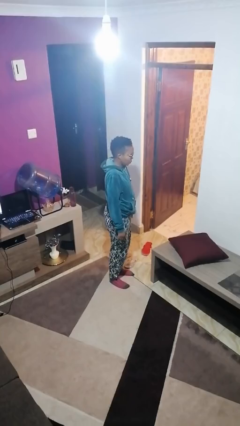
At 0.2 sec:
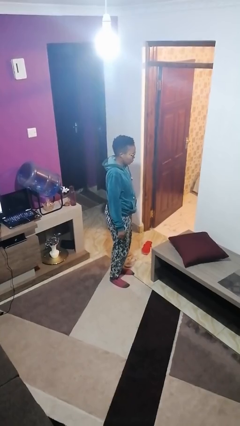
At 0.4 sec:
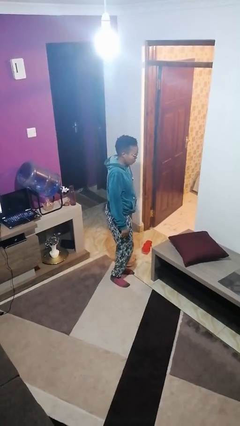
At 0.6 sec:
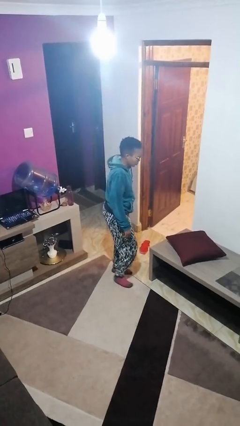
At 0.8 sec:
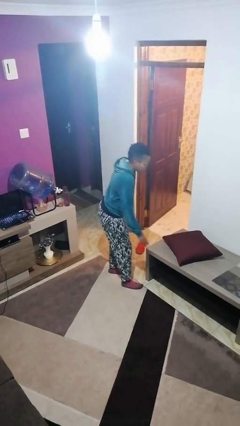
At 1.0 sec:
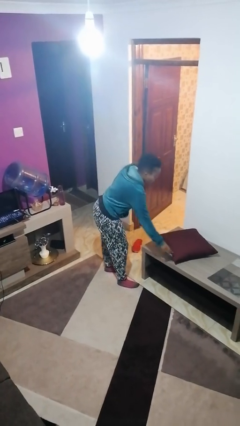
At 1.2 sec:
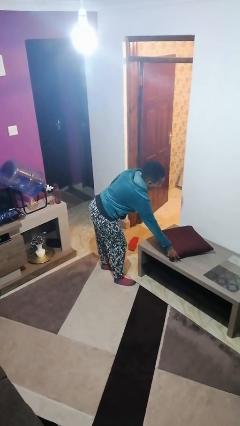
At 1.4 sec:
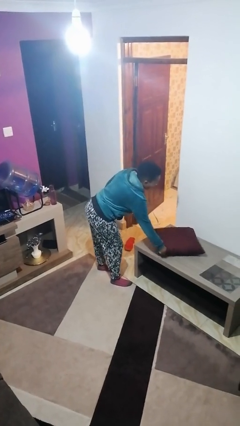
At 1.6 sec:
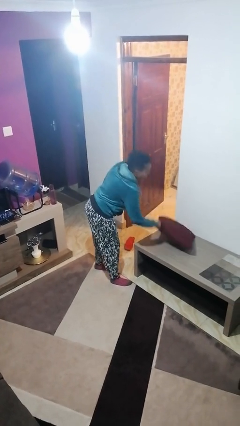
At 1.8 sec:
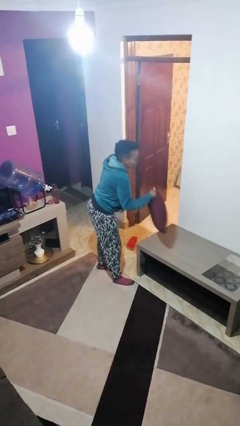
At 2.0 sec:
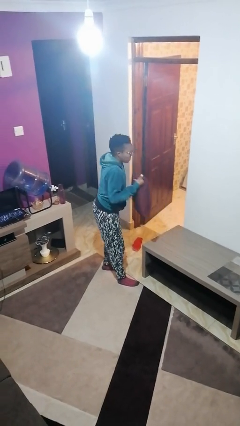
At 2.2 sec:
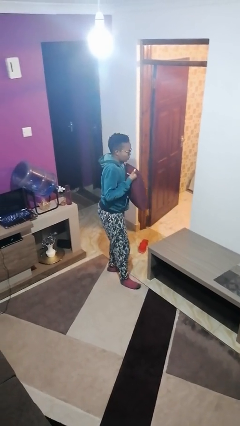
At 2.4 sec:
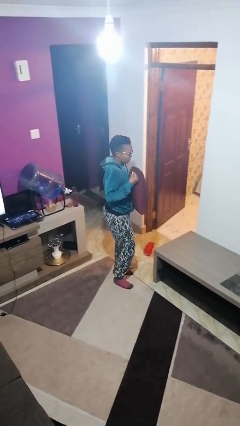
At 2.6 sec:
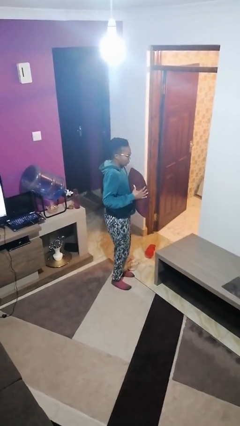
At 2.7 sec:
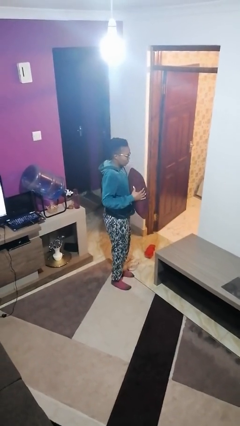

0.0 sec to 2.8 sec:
person picks up object from table

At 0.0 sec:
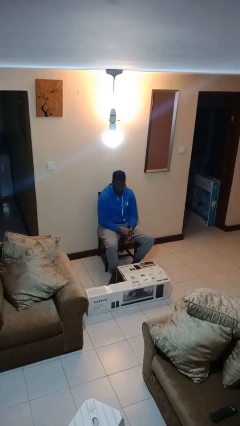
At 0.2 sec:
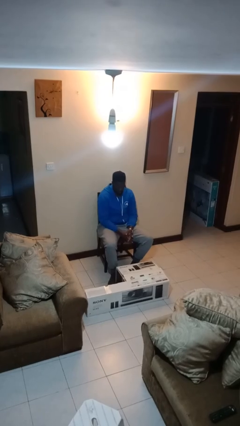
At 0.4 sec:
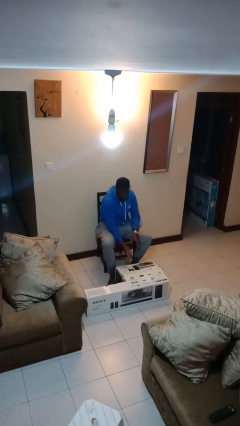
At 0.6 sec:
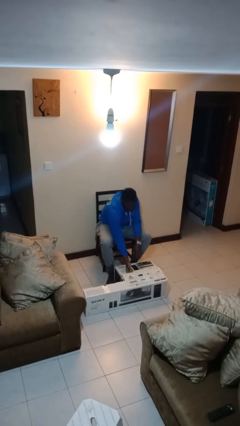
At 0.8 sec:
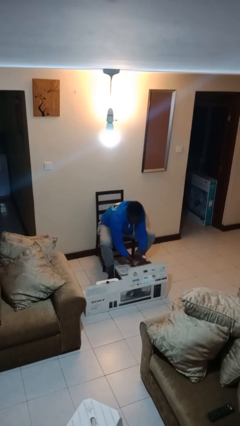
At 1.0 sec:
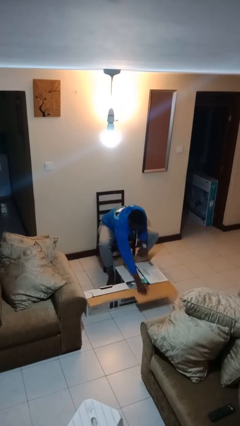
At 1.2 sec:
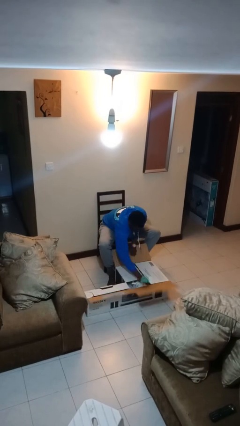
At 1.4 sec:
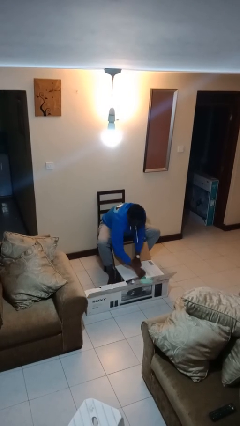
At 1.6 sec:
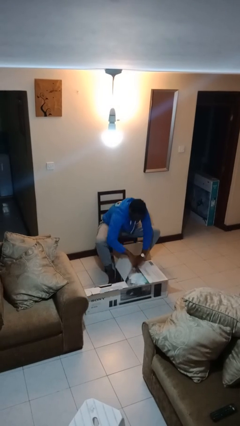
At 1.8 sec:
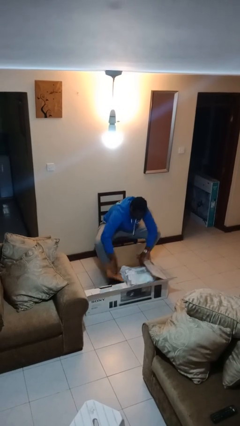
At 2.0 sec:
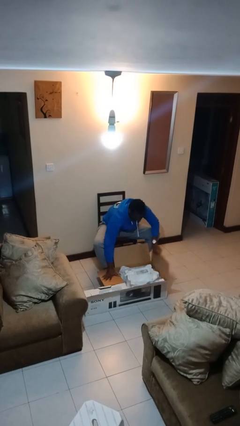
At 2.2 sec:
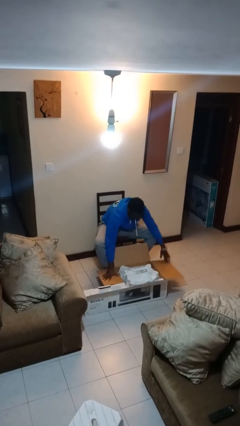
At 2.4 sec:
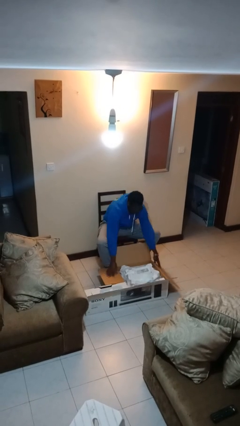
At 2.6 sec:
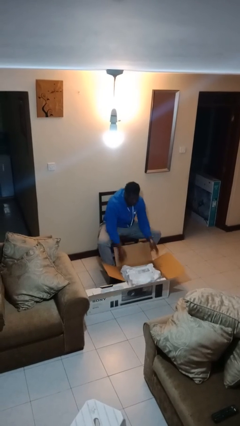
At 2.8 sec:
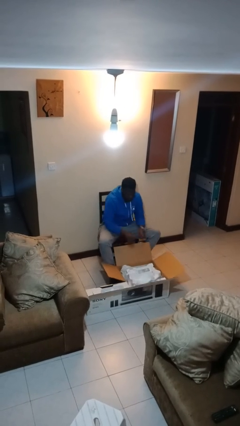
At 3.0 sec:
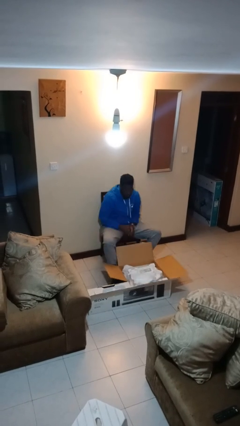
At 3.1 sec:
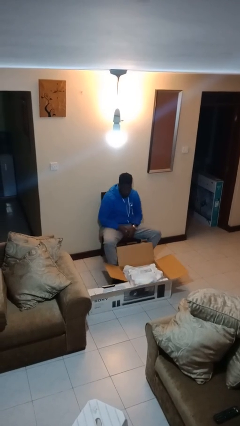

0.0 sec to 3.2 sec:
person opens box

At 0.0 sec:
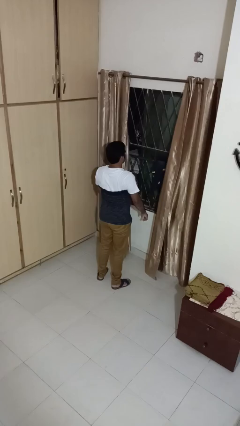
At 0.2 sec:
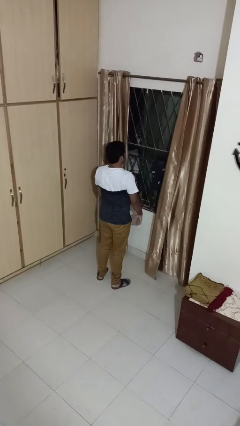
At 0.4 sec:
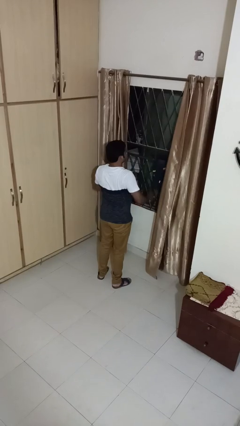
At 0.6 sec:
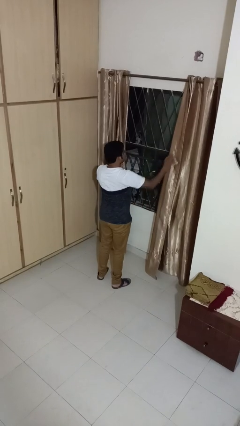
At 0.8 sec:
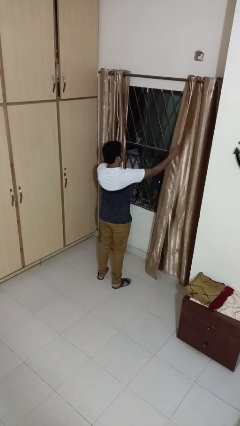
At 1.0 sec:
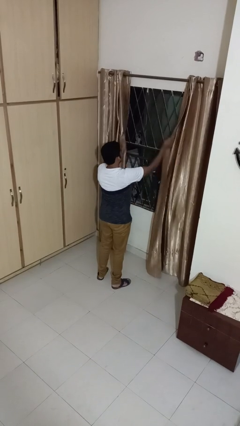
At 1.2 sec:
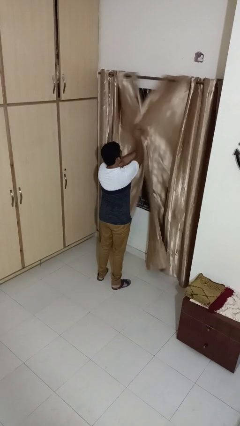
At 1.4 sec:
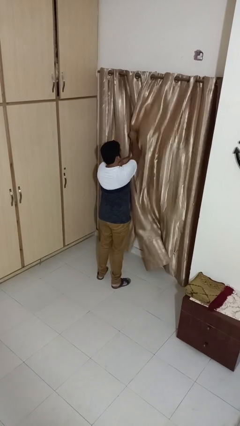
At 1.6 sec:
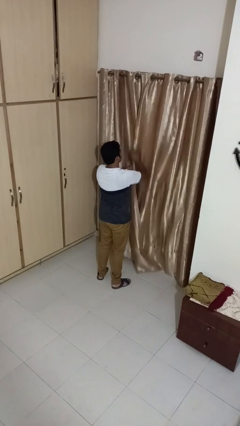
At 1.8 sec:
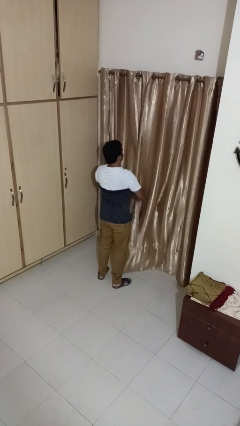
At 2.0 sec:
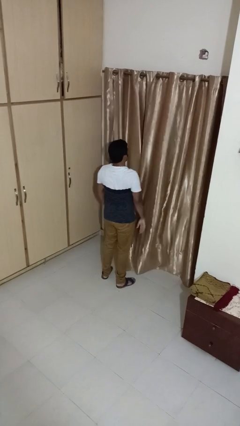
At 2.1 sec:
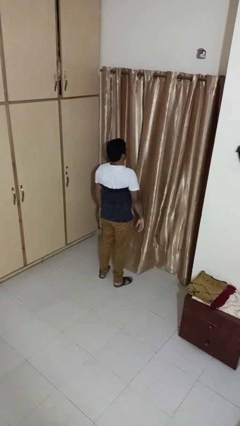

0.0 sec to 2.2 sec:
person closes curtains

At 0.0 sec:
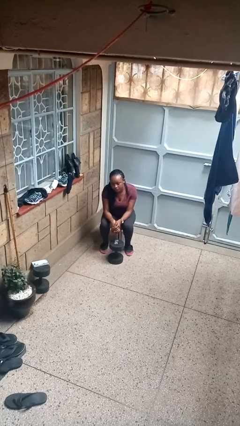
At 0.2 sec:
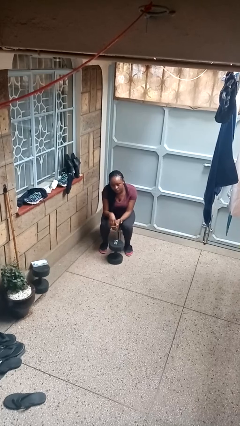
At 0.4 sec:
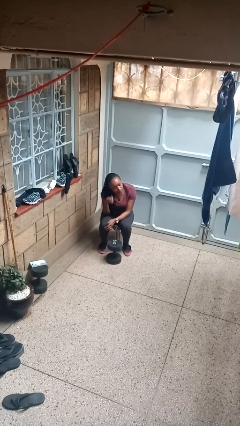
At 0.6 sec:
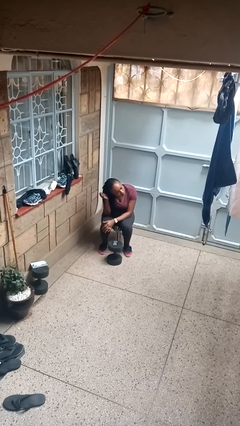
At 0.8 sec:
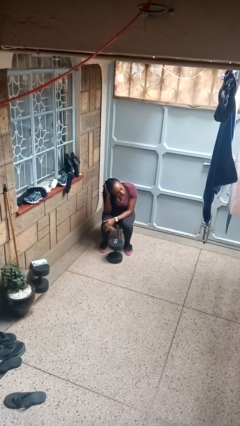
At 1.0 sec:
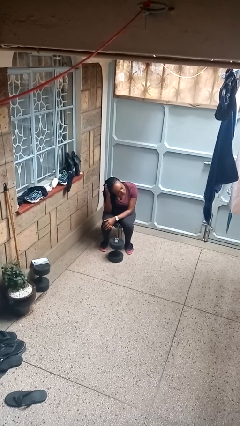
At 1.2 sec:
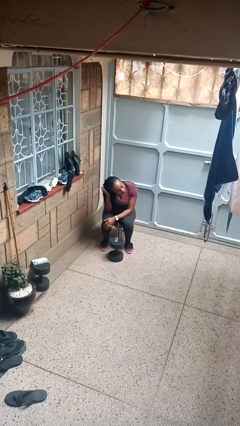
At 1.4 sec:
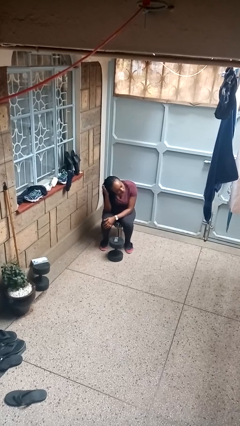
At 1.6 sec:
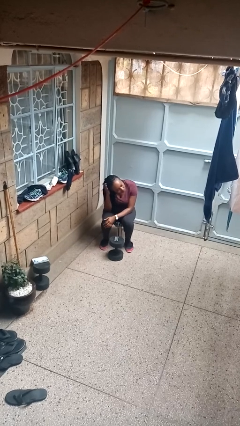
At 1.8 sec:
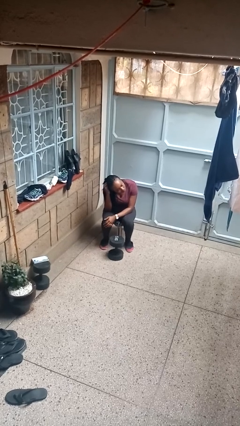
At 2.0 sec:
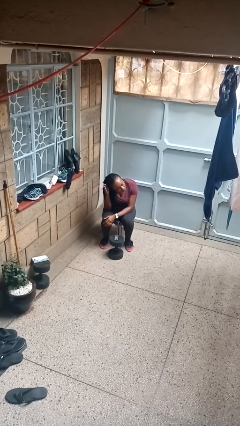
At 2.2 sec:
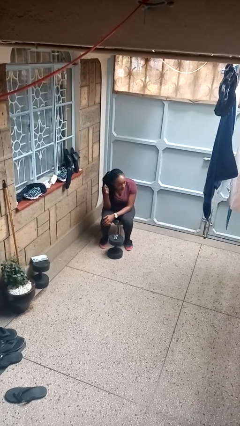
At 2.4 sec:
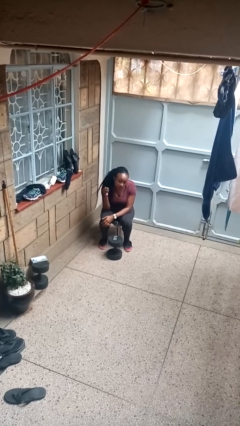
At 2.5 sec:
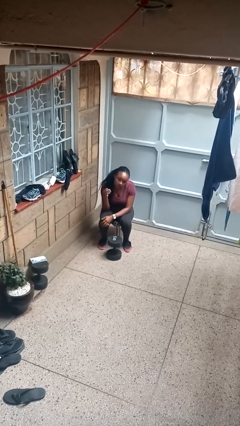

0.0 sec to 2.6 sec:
person pats head

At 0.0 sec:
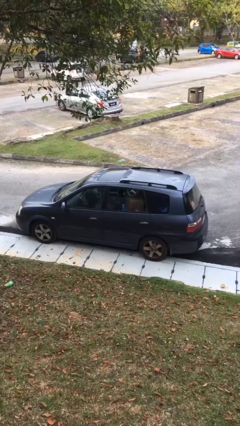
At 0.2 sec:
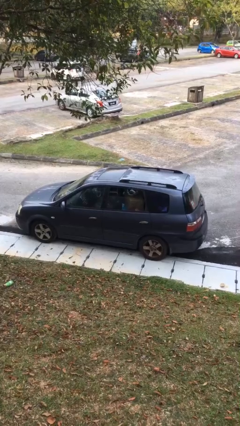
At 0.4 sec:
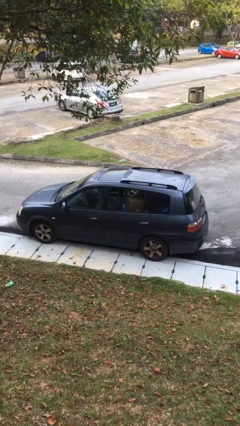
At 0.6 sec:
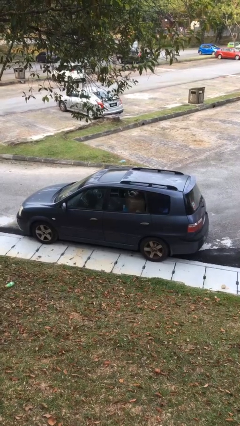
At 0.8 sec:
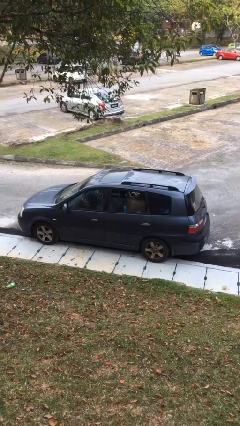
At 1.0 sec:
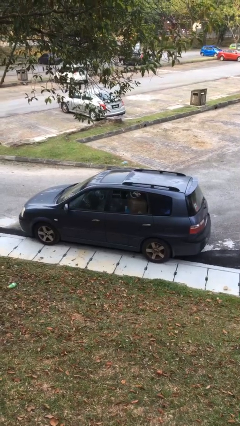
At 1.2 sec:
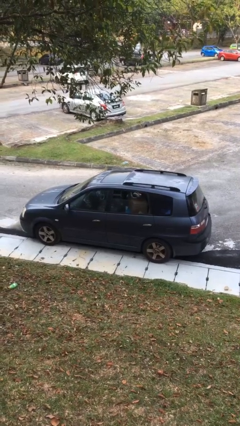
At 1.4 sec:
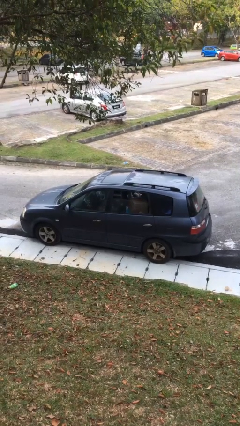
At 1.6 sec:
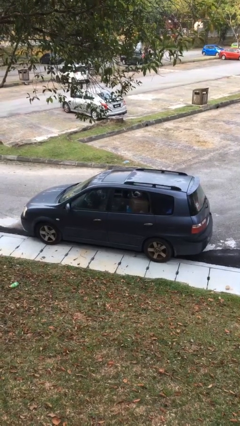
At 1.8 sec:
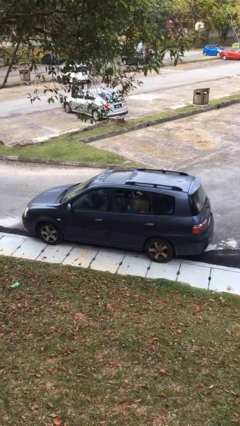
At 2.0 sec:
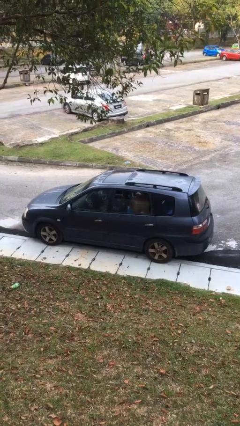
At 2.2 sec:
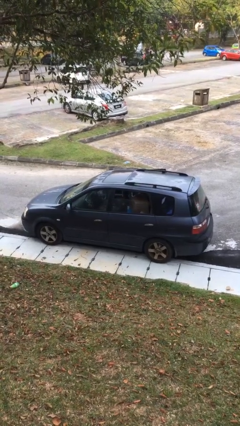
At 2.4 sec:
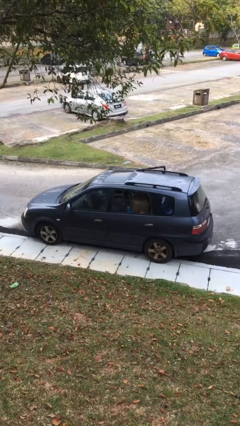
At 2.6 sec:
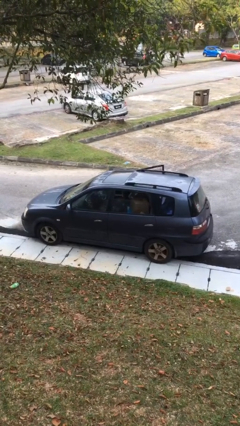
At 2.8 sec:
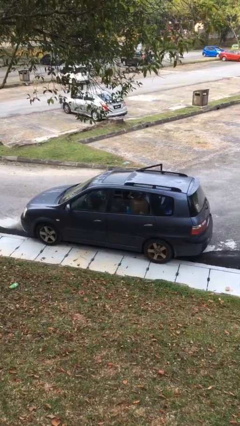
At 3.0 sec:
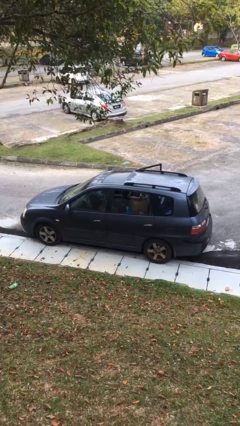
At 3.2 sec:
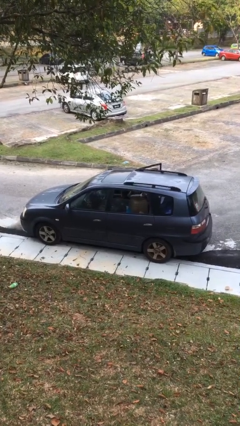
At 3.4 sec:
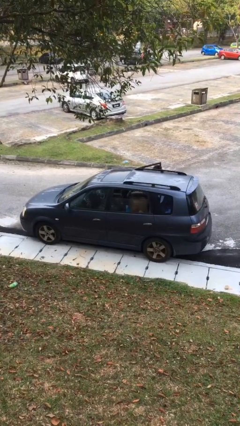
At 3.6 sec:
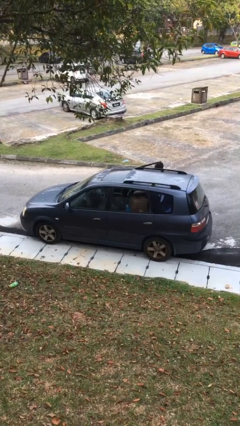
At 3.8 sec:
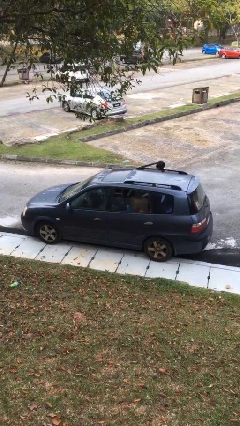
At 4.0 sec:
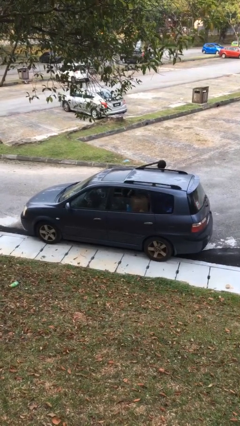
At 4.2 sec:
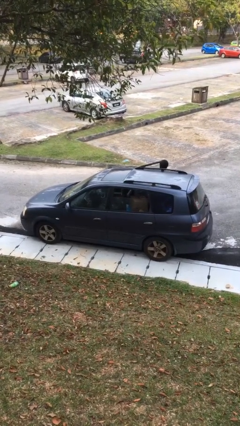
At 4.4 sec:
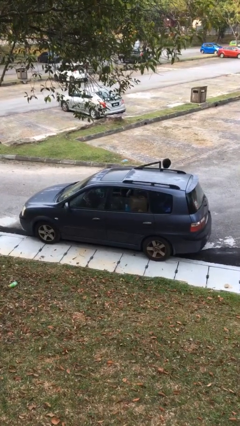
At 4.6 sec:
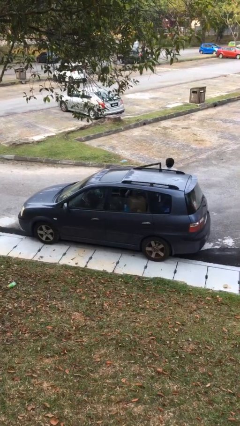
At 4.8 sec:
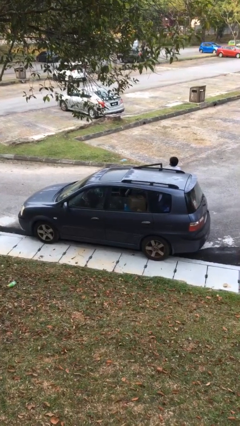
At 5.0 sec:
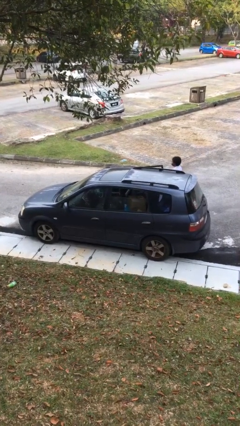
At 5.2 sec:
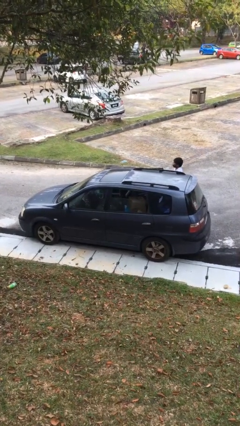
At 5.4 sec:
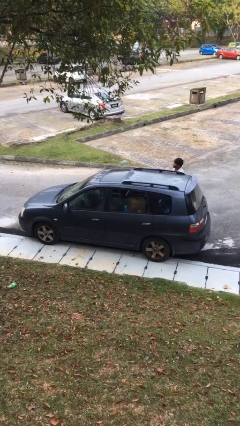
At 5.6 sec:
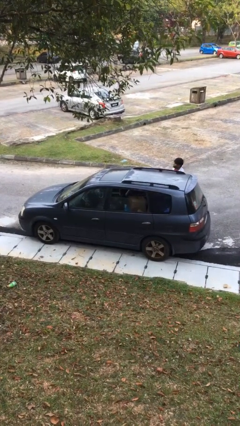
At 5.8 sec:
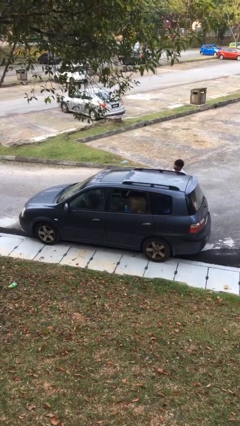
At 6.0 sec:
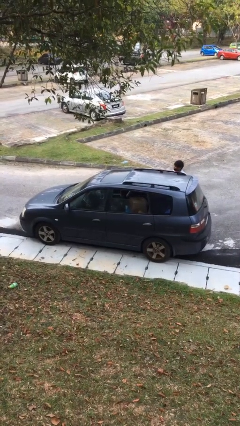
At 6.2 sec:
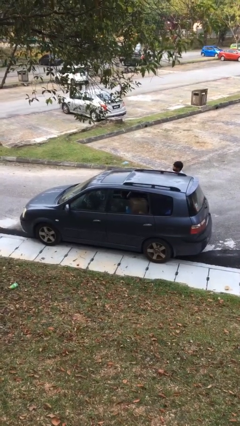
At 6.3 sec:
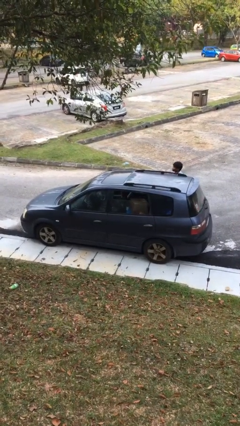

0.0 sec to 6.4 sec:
car drops off person
